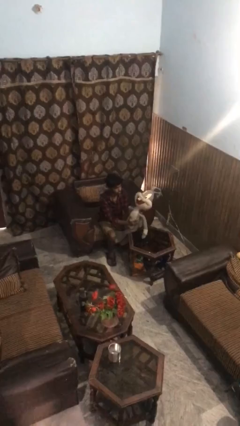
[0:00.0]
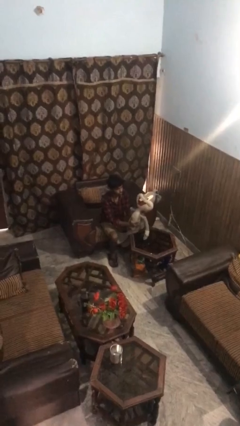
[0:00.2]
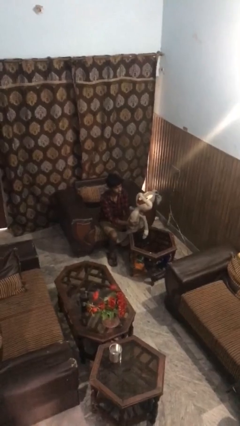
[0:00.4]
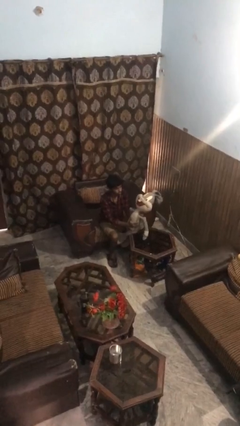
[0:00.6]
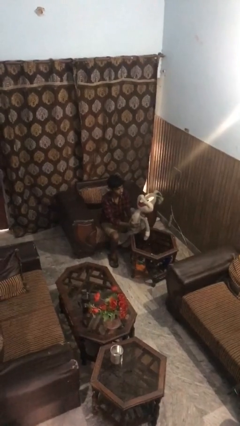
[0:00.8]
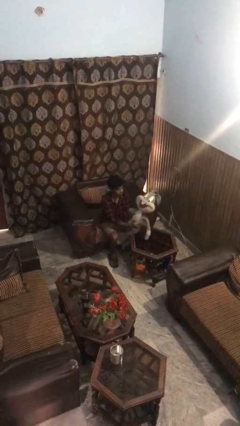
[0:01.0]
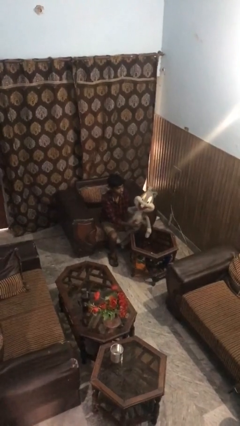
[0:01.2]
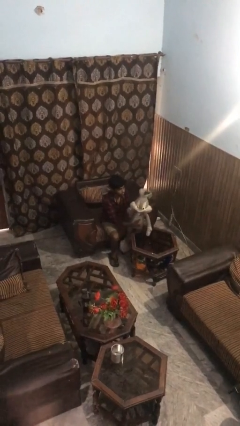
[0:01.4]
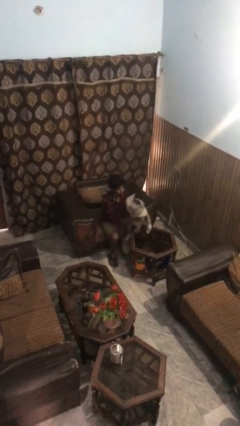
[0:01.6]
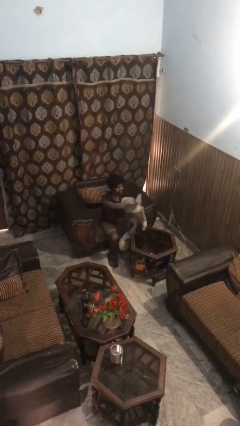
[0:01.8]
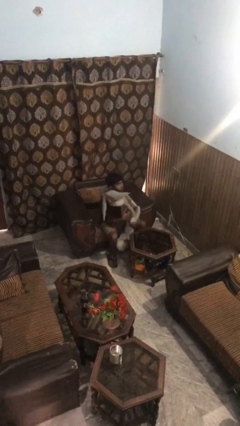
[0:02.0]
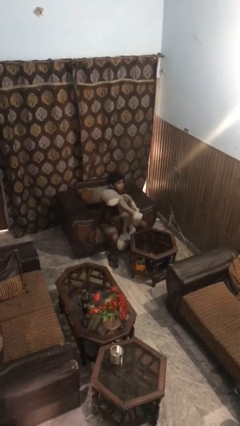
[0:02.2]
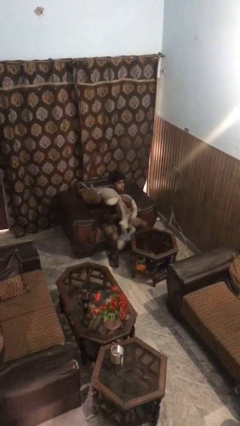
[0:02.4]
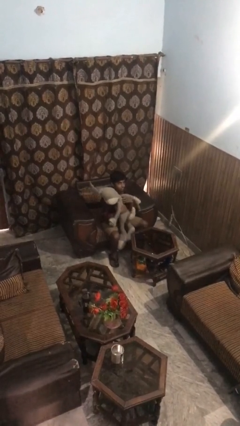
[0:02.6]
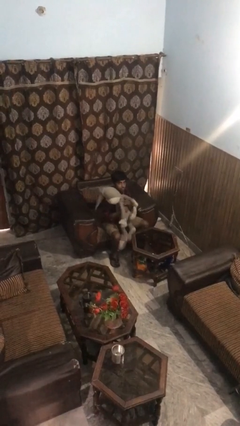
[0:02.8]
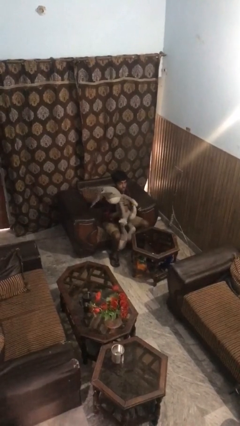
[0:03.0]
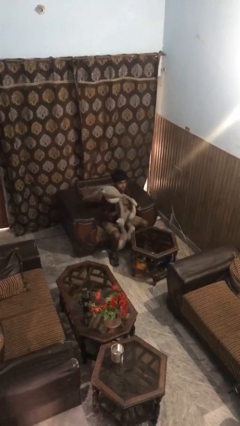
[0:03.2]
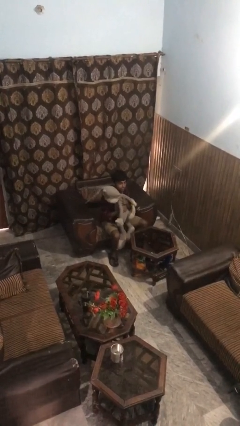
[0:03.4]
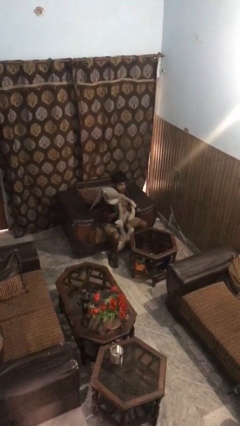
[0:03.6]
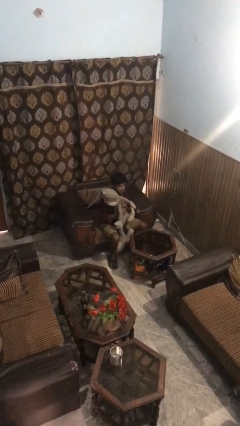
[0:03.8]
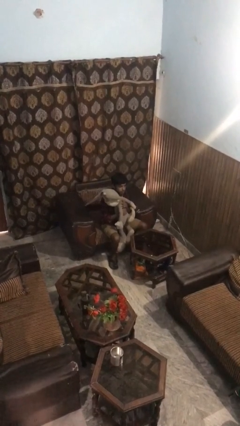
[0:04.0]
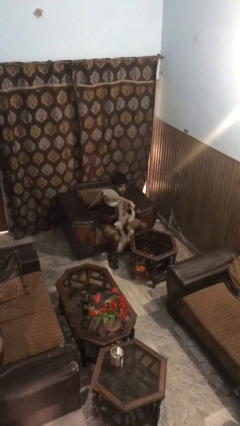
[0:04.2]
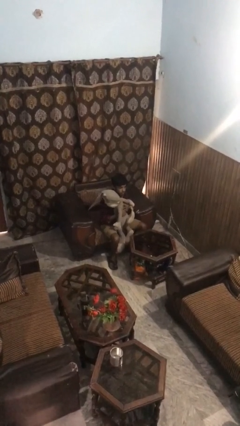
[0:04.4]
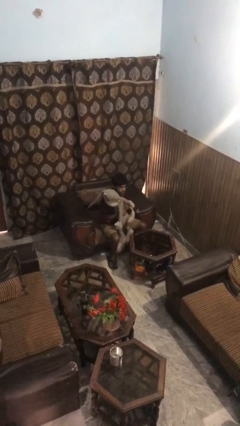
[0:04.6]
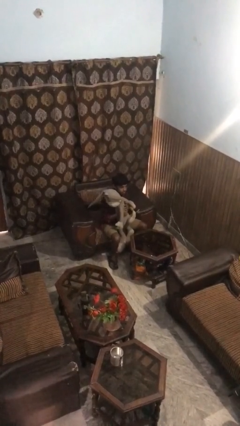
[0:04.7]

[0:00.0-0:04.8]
person hugs stuffed animal

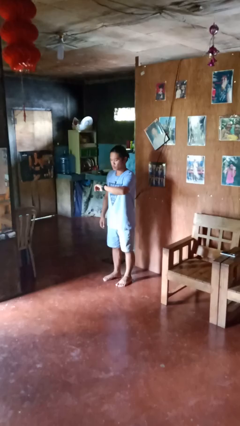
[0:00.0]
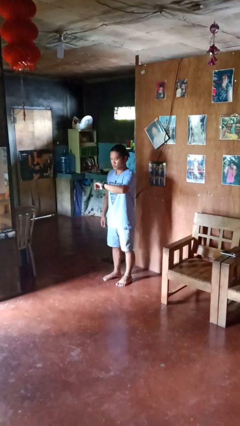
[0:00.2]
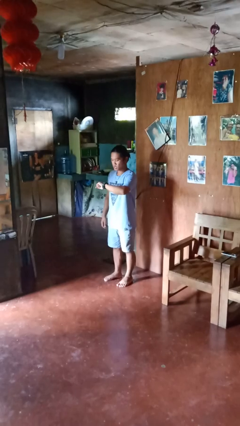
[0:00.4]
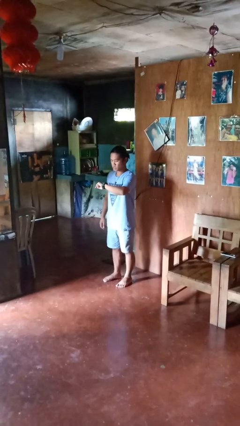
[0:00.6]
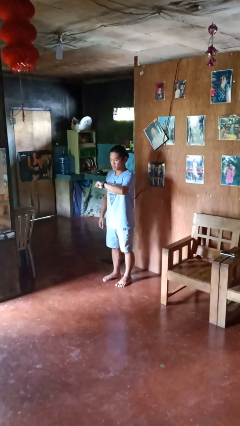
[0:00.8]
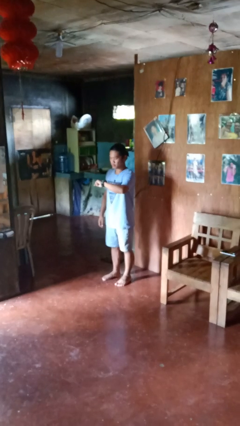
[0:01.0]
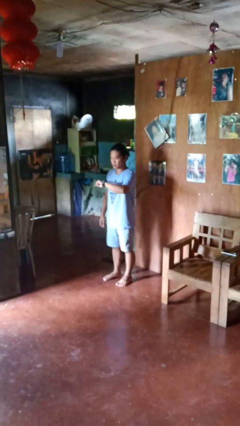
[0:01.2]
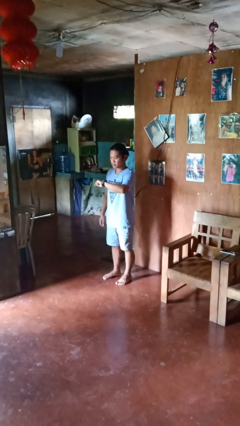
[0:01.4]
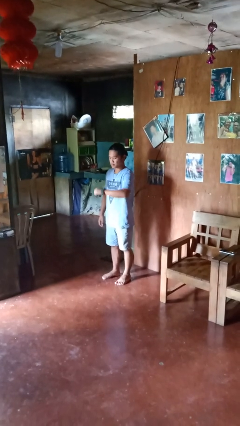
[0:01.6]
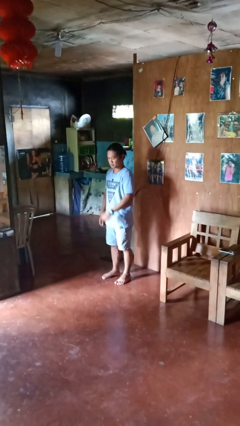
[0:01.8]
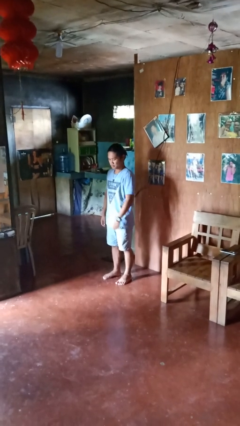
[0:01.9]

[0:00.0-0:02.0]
person looks at wristwatch

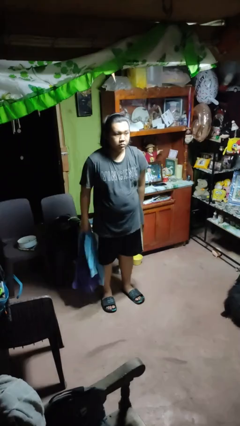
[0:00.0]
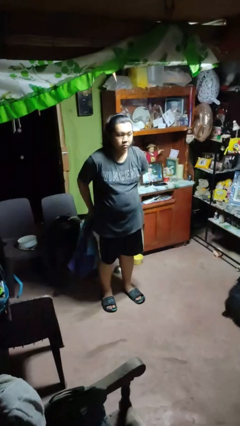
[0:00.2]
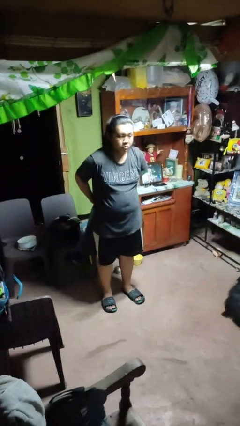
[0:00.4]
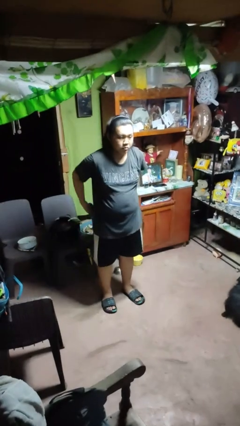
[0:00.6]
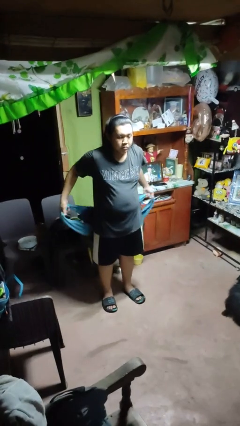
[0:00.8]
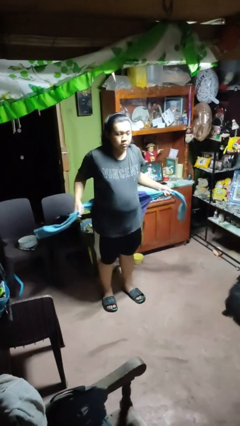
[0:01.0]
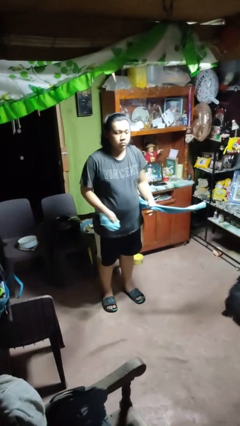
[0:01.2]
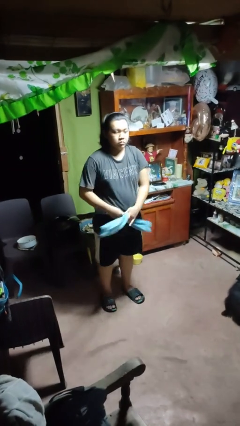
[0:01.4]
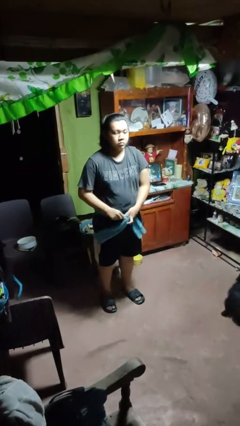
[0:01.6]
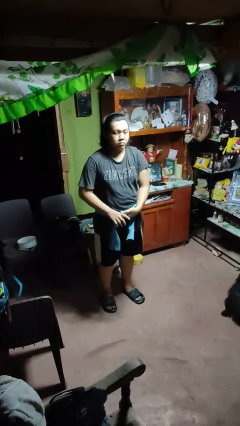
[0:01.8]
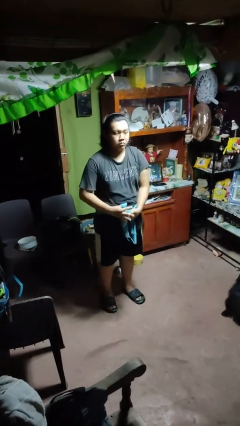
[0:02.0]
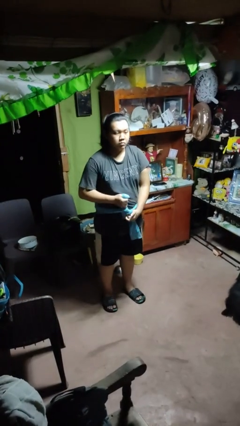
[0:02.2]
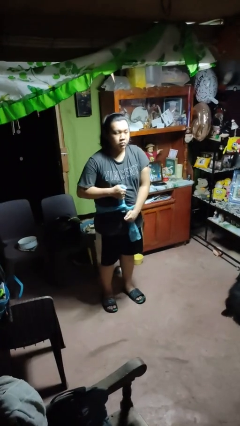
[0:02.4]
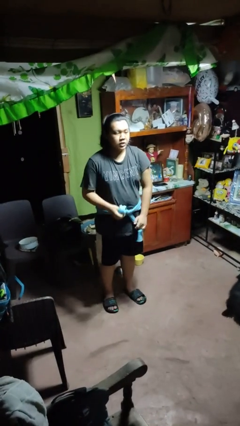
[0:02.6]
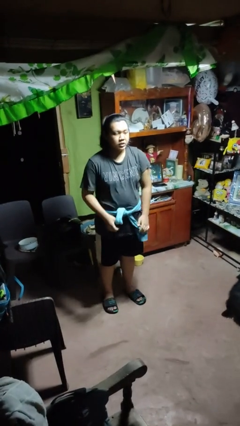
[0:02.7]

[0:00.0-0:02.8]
person ties jacket around waist

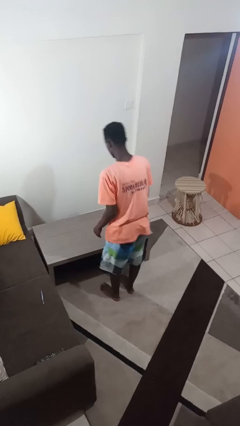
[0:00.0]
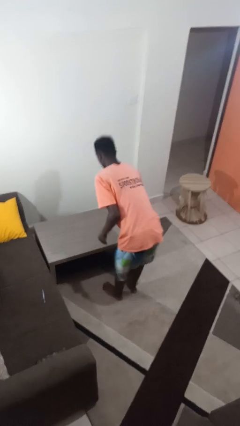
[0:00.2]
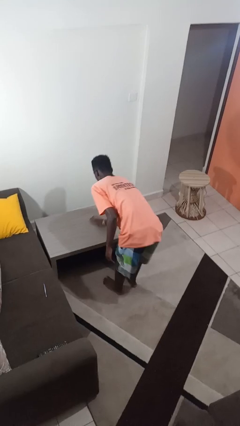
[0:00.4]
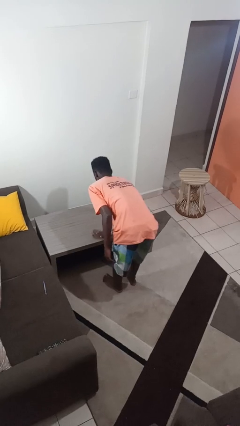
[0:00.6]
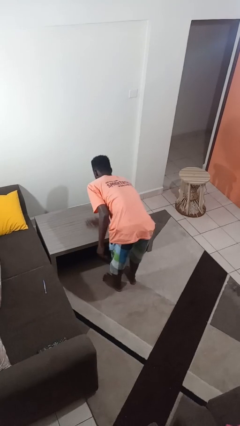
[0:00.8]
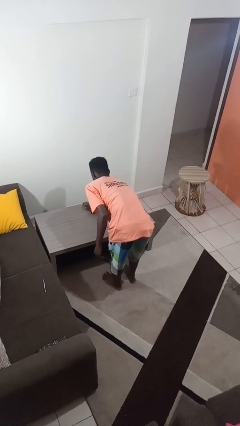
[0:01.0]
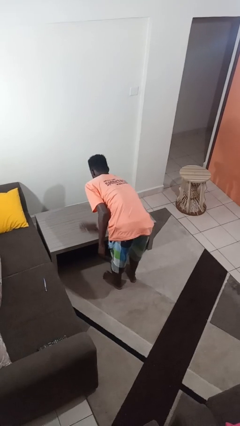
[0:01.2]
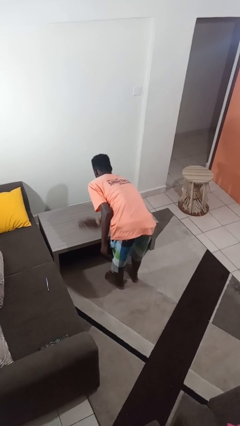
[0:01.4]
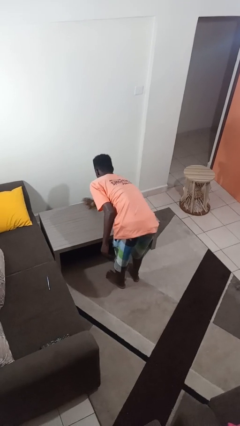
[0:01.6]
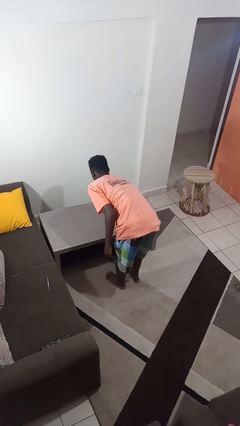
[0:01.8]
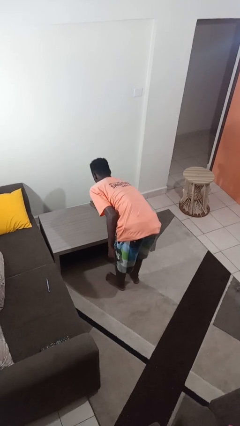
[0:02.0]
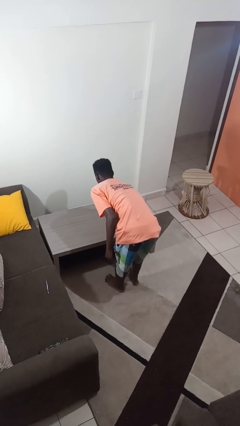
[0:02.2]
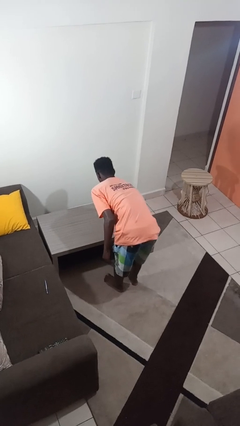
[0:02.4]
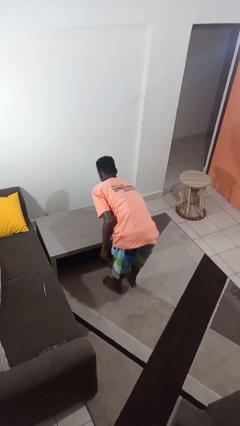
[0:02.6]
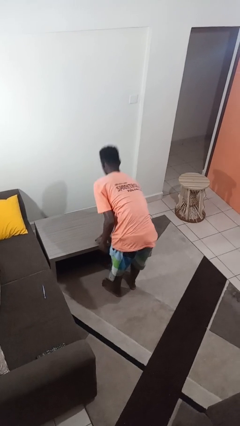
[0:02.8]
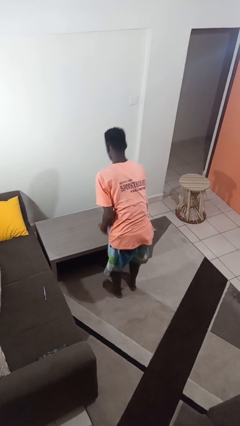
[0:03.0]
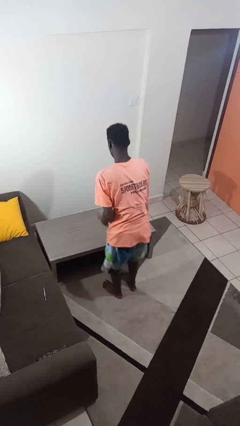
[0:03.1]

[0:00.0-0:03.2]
person cleans table with rag

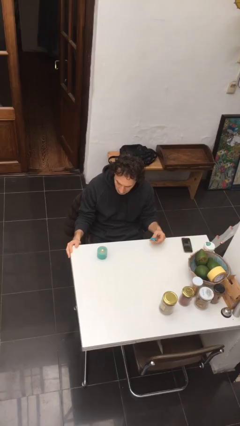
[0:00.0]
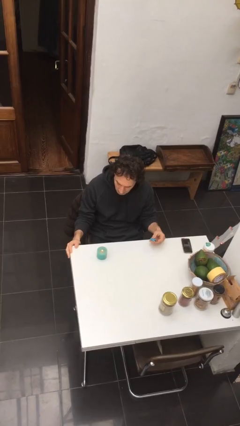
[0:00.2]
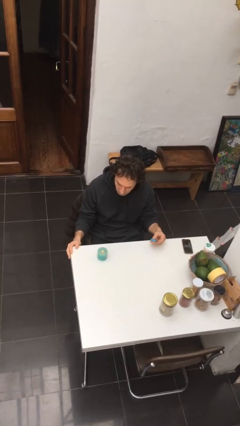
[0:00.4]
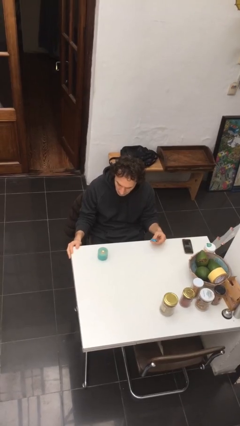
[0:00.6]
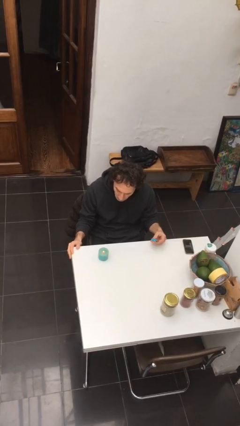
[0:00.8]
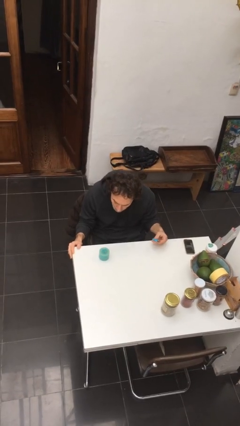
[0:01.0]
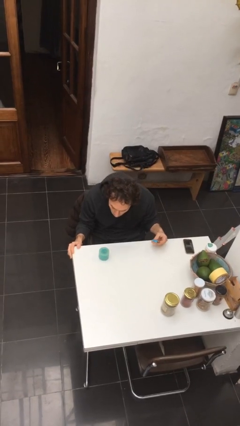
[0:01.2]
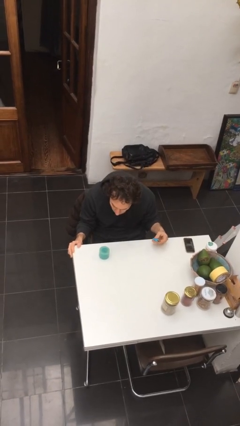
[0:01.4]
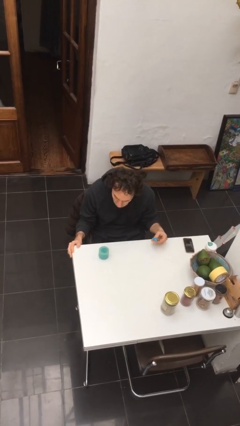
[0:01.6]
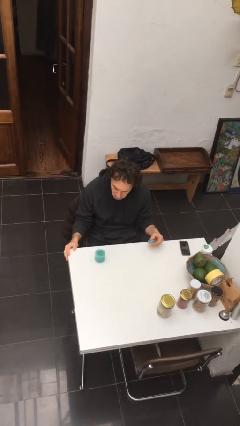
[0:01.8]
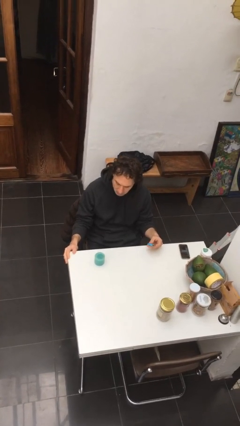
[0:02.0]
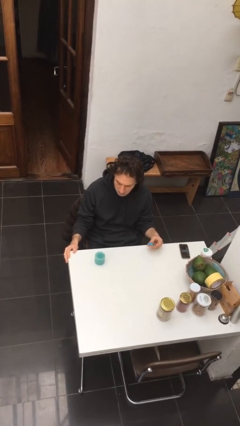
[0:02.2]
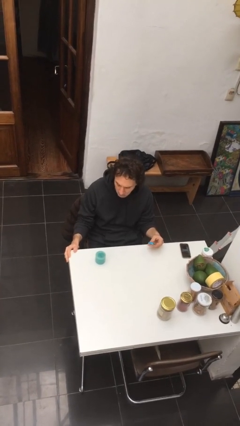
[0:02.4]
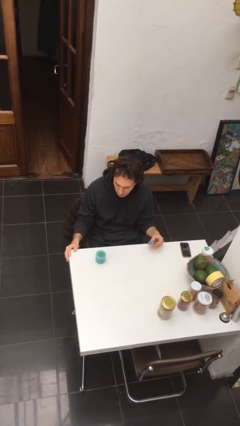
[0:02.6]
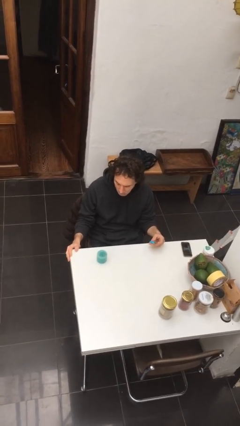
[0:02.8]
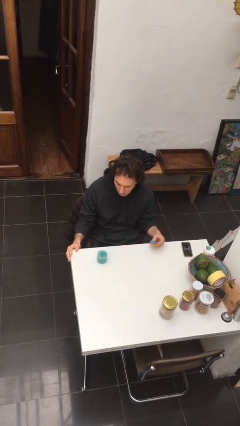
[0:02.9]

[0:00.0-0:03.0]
person extinguishes candle

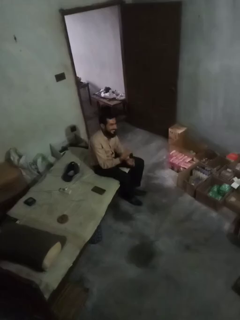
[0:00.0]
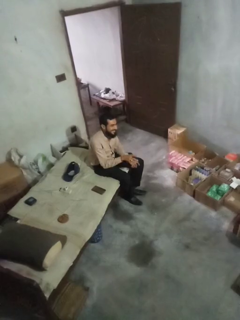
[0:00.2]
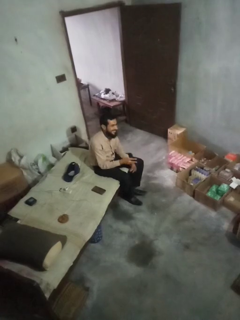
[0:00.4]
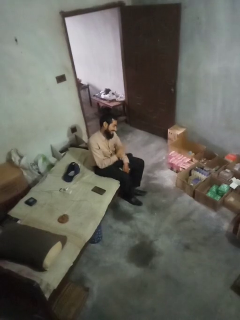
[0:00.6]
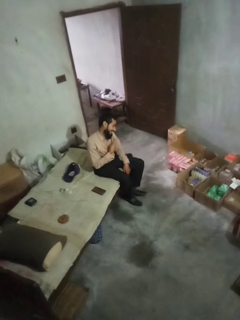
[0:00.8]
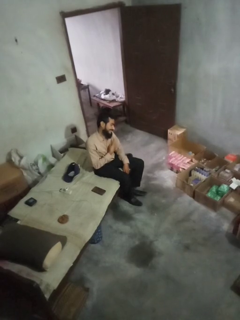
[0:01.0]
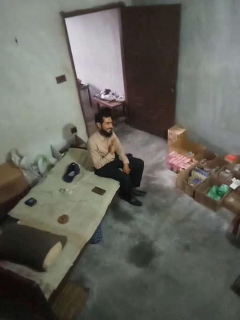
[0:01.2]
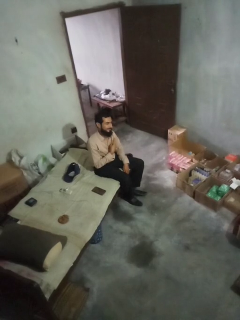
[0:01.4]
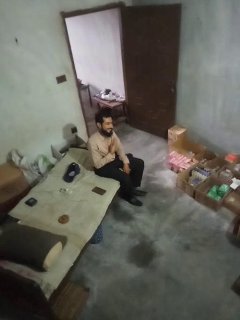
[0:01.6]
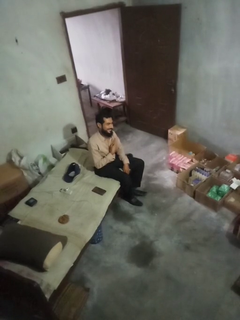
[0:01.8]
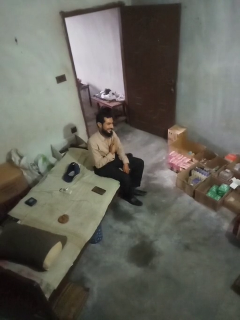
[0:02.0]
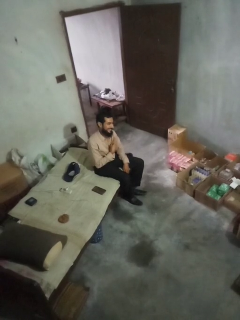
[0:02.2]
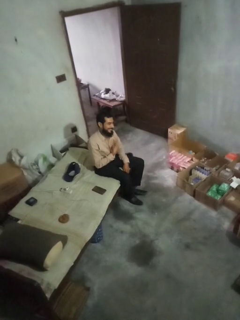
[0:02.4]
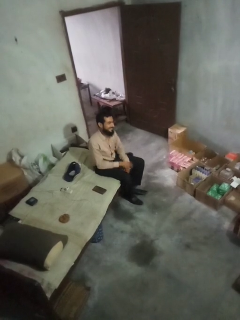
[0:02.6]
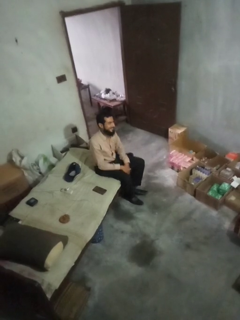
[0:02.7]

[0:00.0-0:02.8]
person gestures peace
